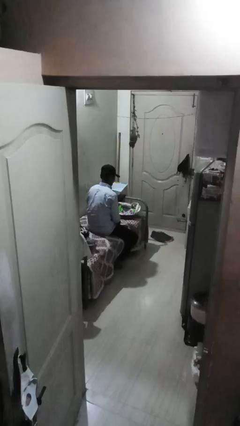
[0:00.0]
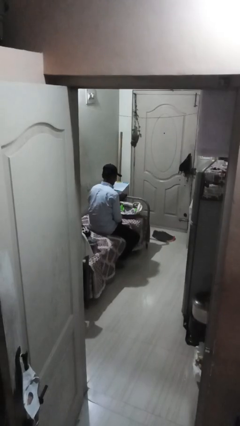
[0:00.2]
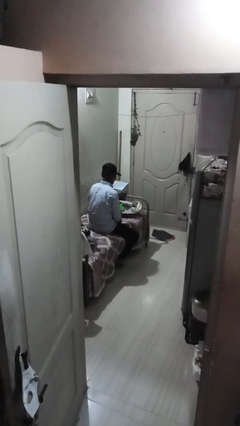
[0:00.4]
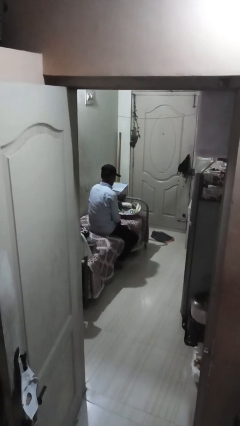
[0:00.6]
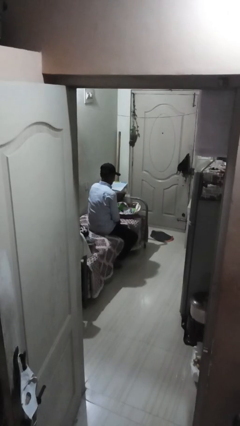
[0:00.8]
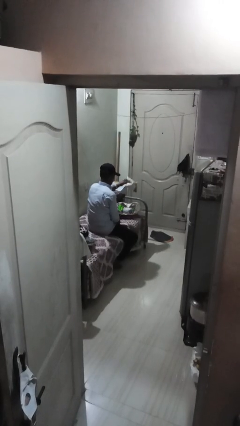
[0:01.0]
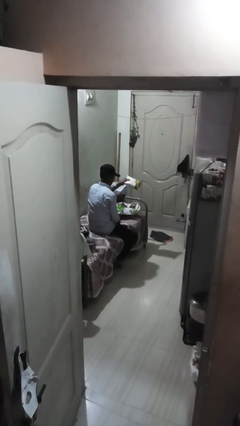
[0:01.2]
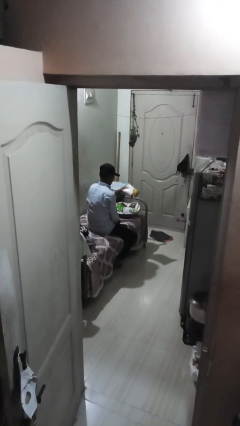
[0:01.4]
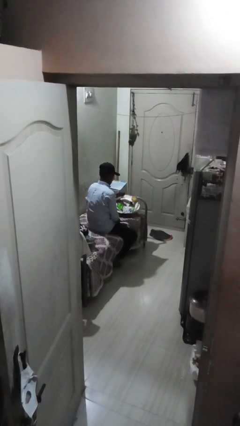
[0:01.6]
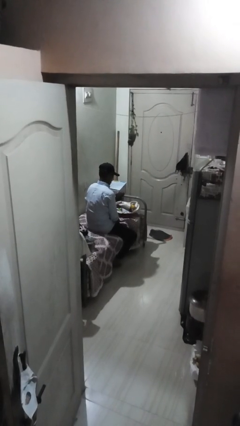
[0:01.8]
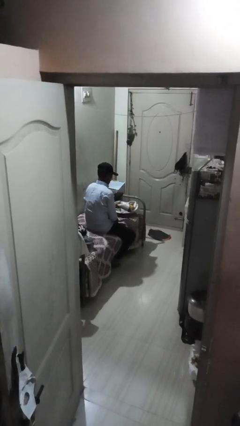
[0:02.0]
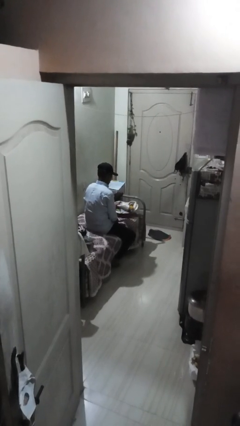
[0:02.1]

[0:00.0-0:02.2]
person takes object from bag

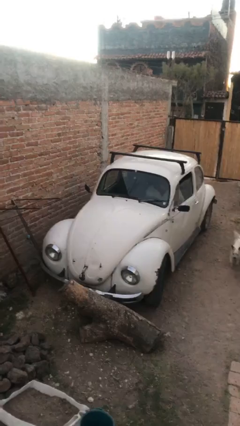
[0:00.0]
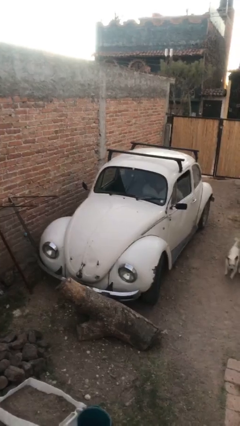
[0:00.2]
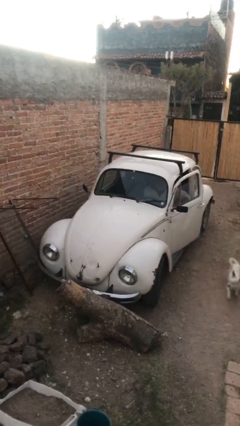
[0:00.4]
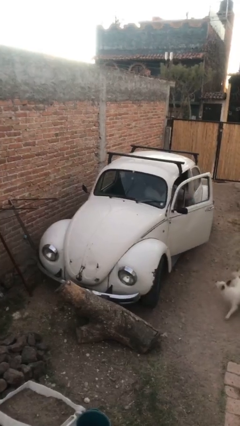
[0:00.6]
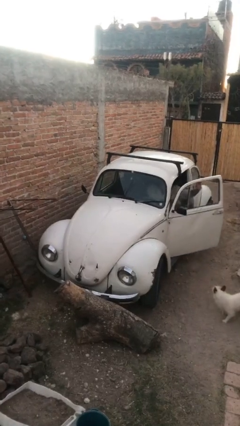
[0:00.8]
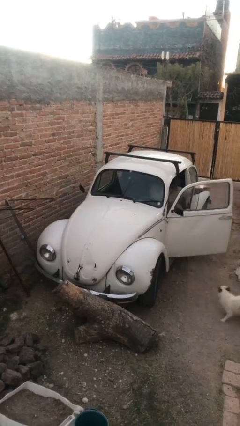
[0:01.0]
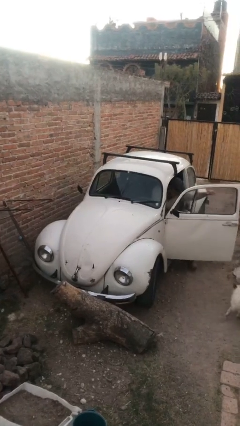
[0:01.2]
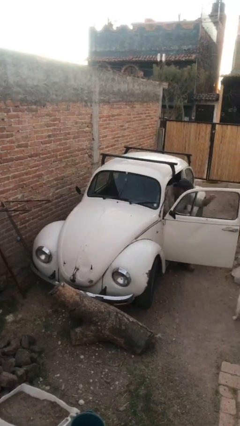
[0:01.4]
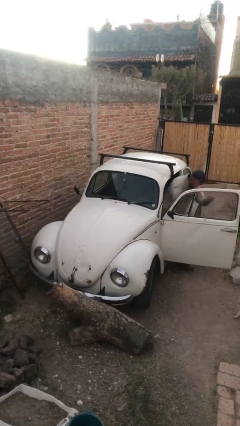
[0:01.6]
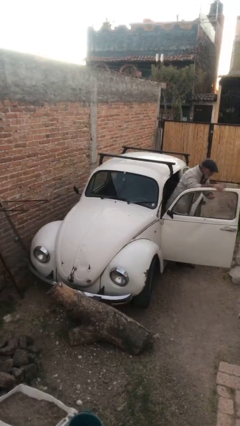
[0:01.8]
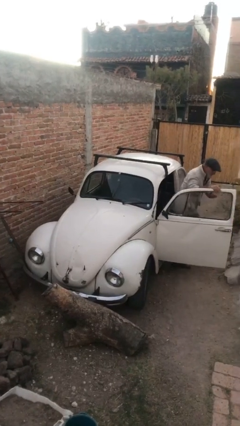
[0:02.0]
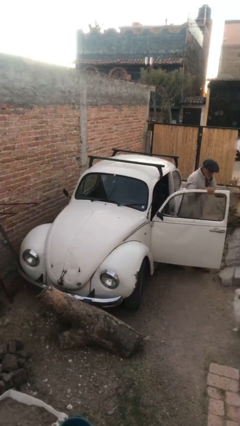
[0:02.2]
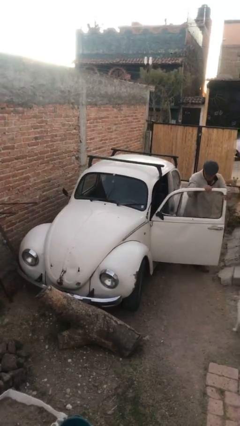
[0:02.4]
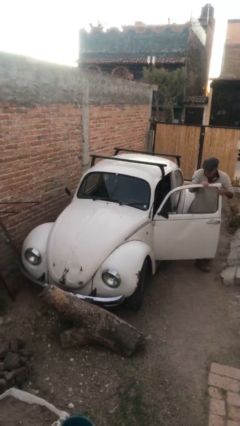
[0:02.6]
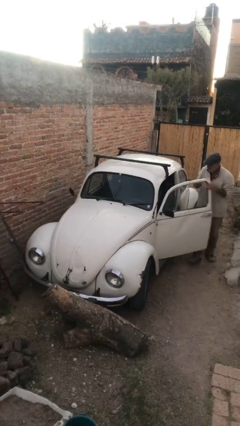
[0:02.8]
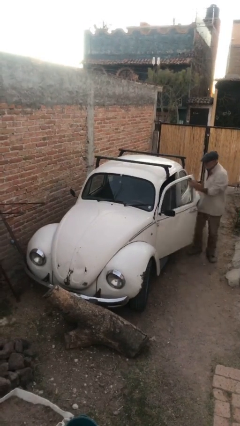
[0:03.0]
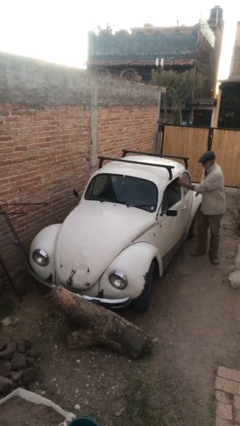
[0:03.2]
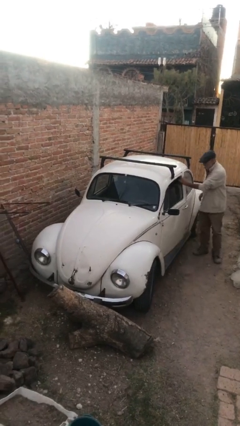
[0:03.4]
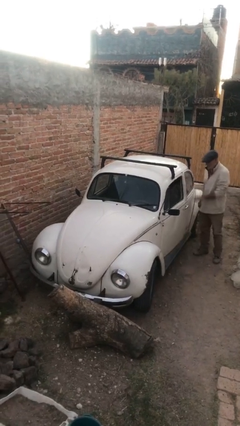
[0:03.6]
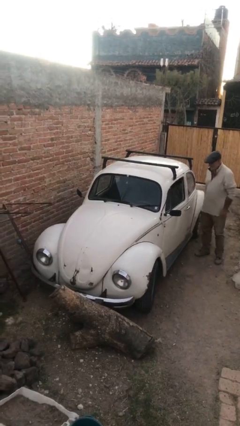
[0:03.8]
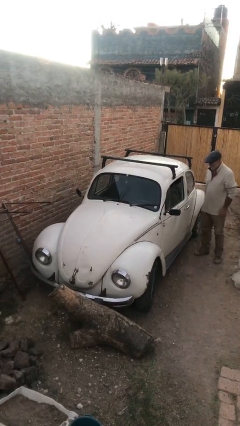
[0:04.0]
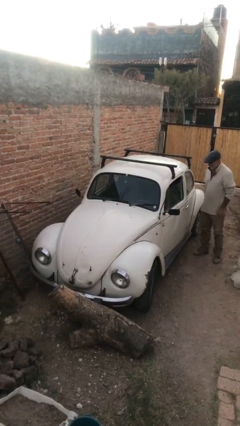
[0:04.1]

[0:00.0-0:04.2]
car drops off person

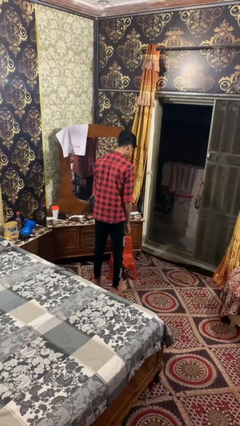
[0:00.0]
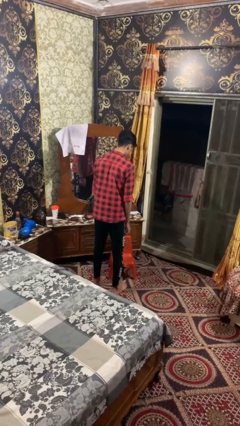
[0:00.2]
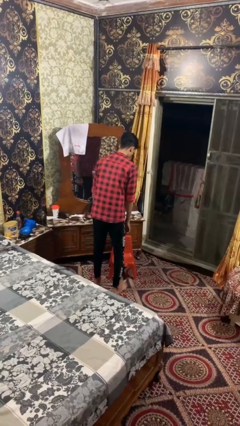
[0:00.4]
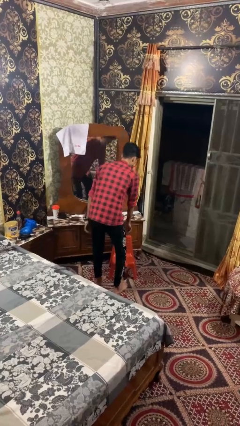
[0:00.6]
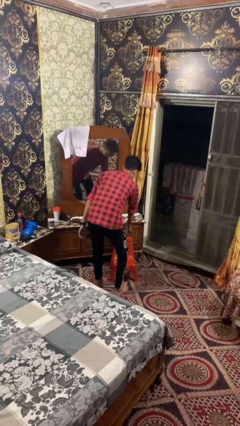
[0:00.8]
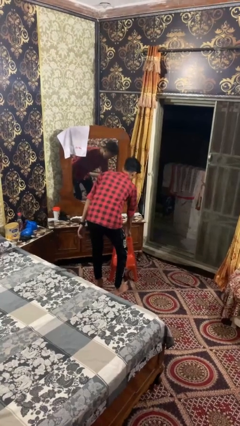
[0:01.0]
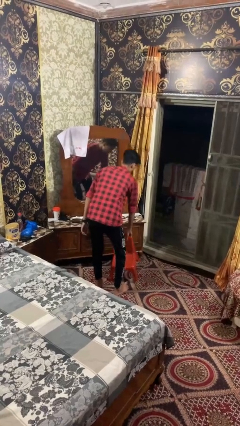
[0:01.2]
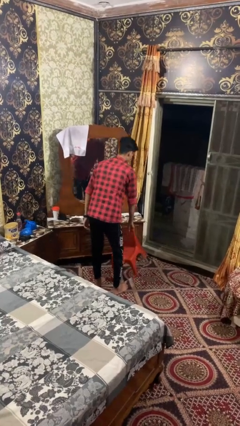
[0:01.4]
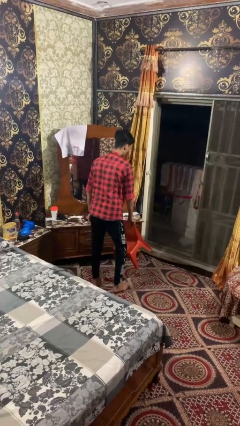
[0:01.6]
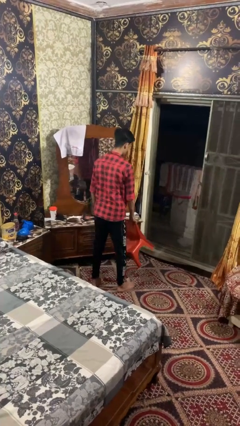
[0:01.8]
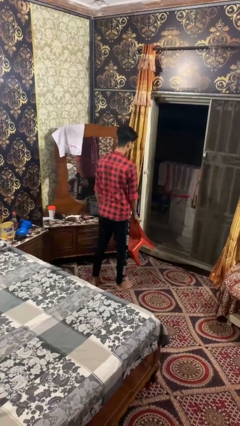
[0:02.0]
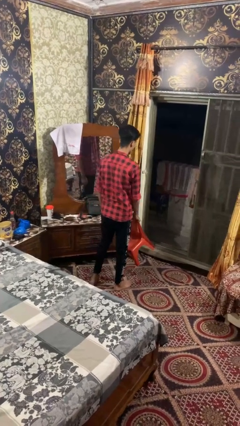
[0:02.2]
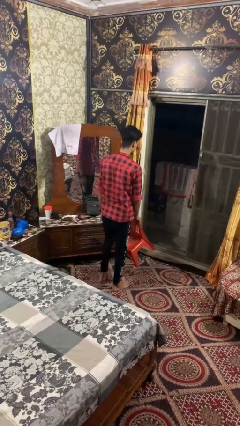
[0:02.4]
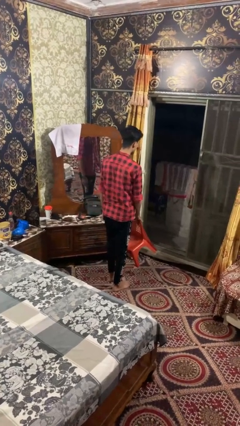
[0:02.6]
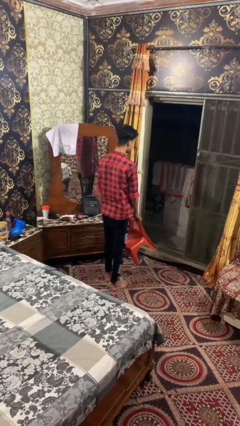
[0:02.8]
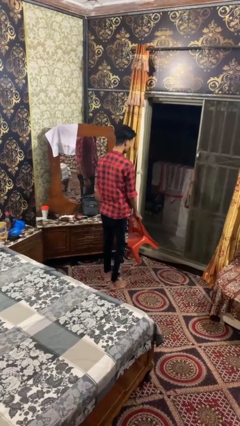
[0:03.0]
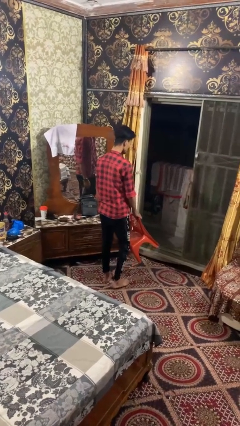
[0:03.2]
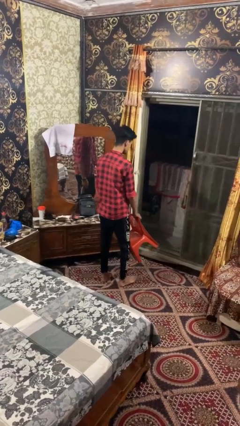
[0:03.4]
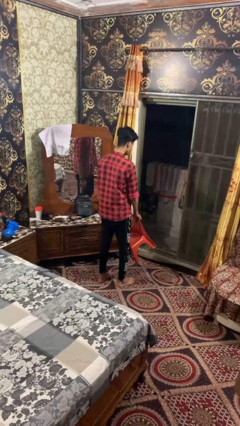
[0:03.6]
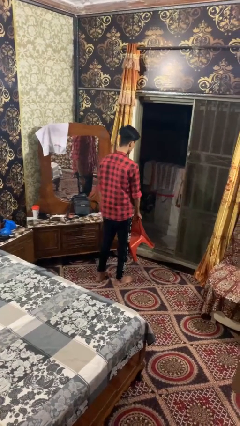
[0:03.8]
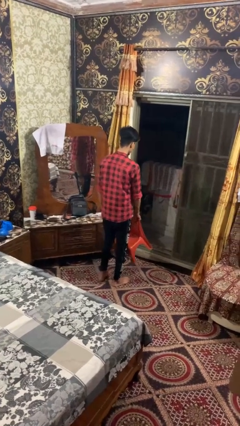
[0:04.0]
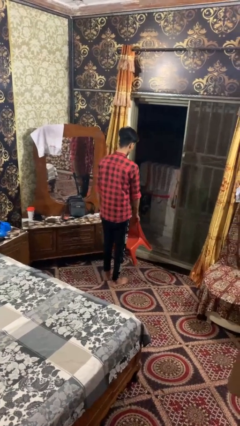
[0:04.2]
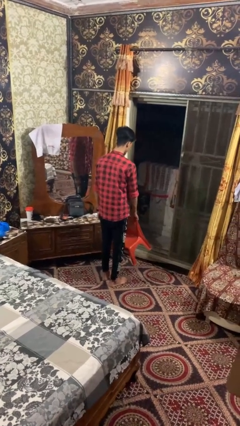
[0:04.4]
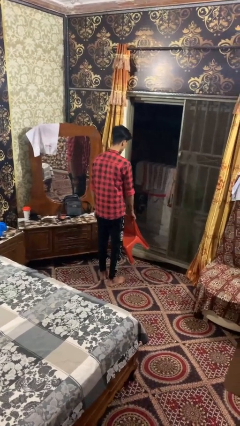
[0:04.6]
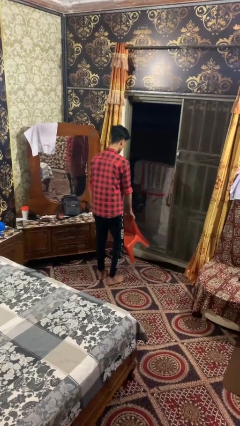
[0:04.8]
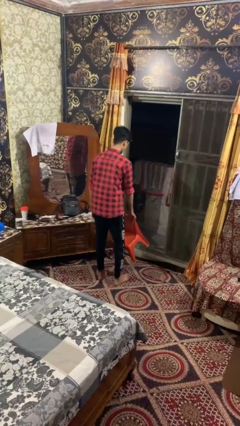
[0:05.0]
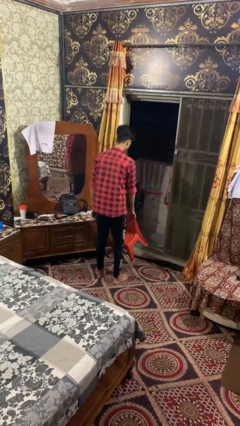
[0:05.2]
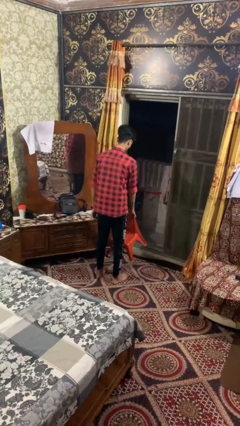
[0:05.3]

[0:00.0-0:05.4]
person carries furniture

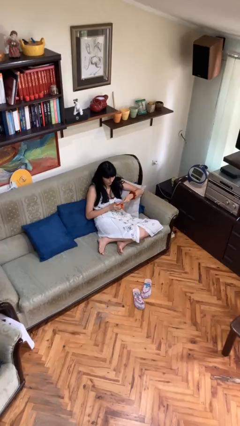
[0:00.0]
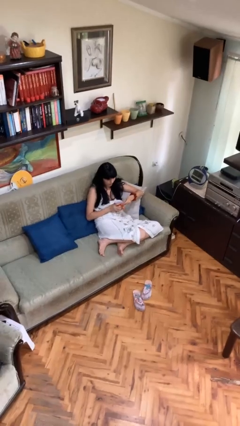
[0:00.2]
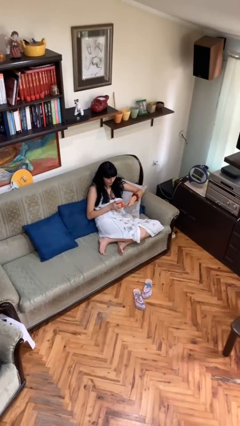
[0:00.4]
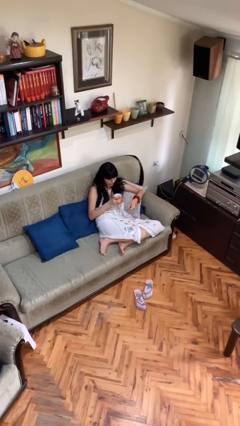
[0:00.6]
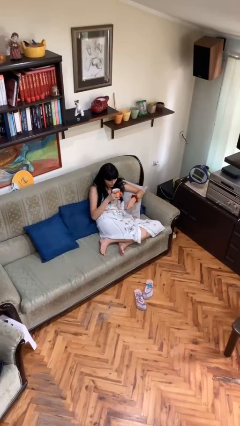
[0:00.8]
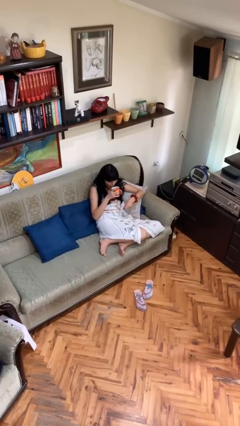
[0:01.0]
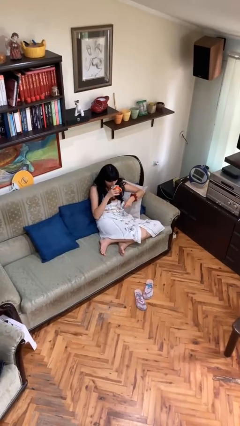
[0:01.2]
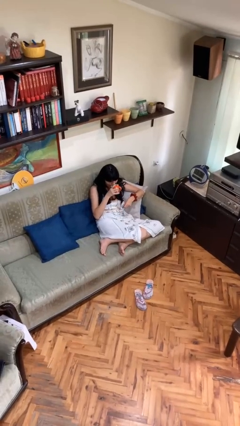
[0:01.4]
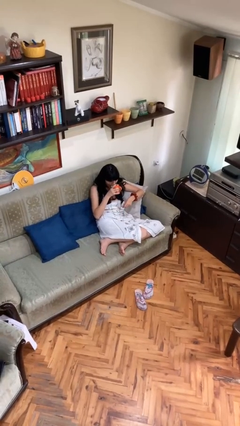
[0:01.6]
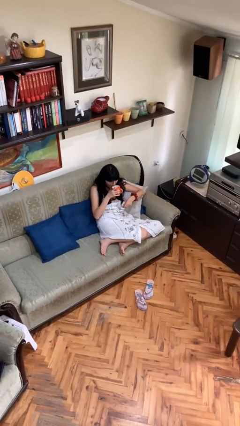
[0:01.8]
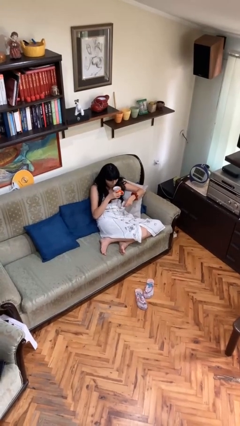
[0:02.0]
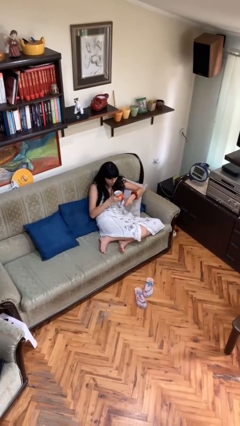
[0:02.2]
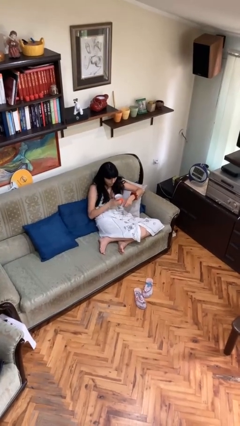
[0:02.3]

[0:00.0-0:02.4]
person drinks from mug

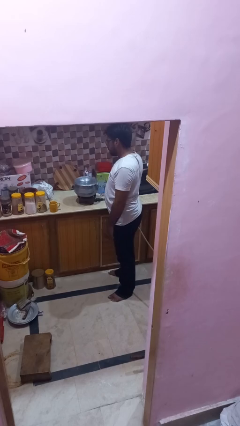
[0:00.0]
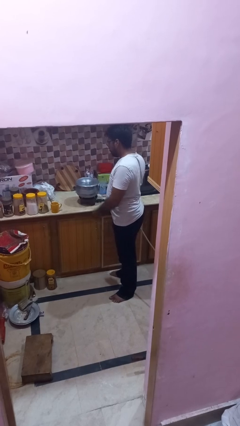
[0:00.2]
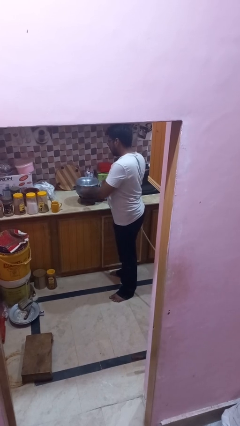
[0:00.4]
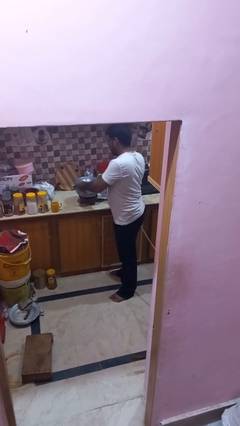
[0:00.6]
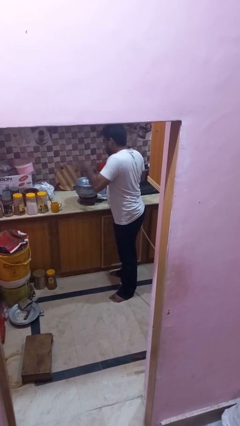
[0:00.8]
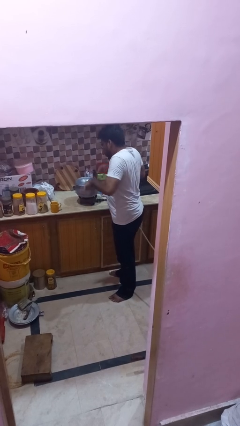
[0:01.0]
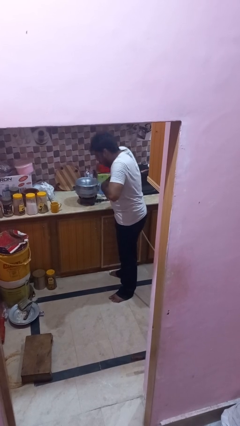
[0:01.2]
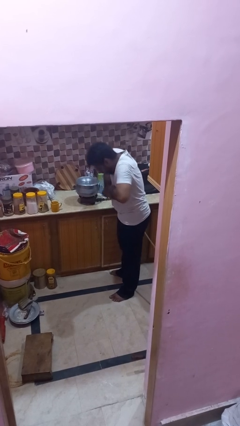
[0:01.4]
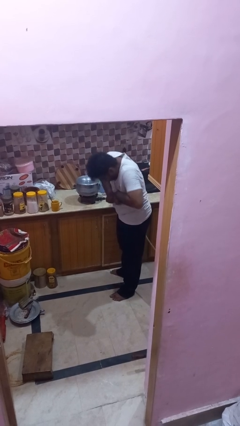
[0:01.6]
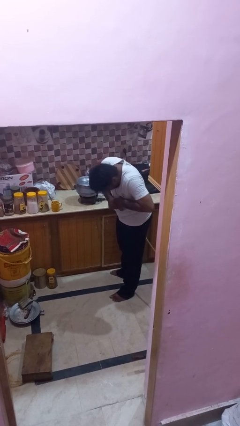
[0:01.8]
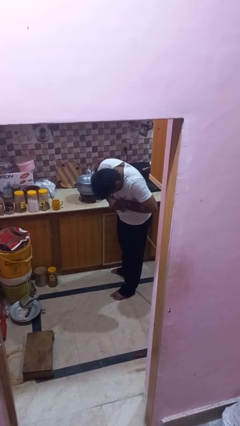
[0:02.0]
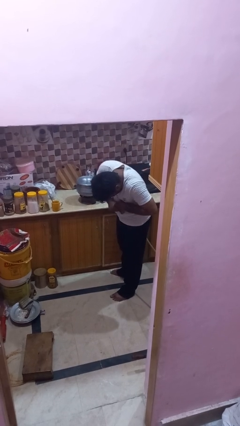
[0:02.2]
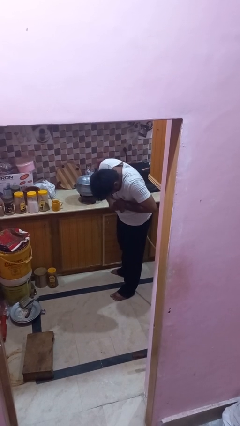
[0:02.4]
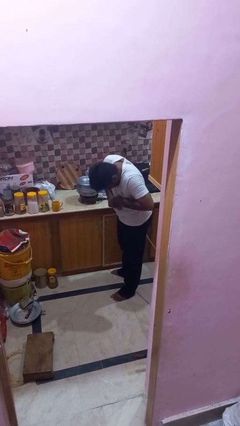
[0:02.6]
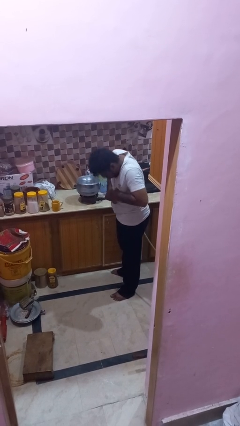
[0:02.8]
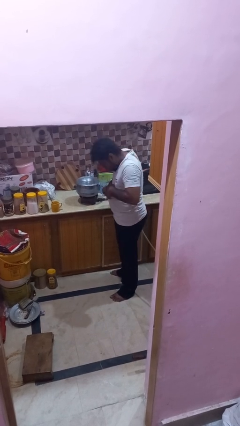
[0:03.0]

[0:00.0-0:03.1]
person burns hand
